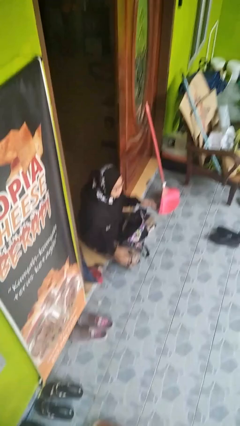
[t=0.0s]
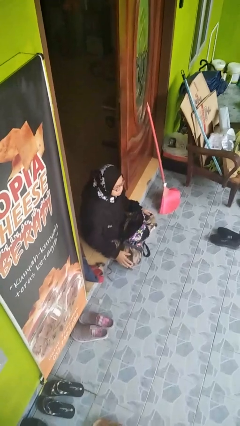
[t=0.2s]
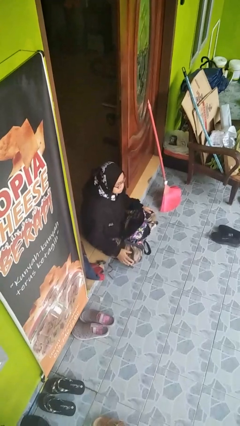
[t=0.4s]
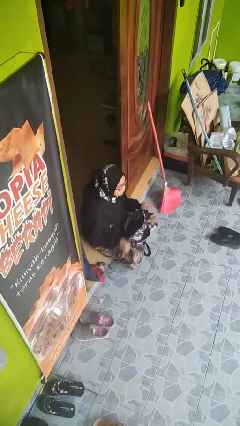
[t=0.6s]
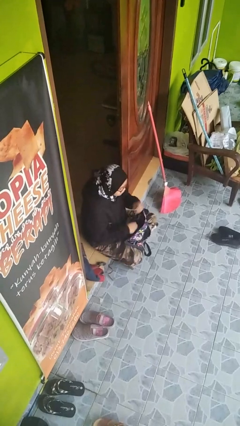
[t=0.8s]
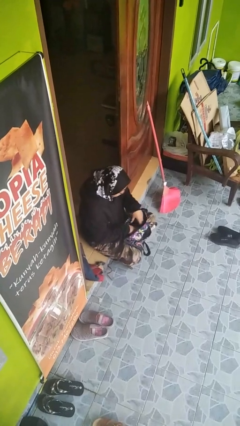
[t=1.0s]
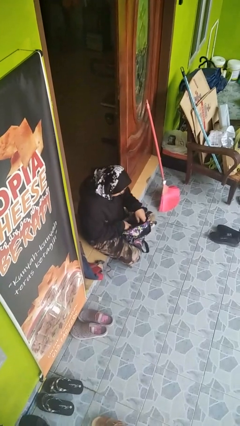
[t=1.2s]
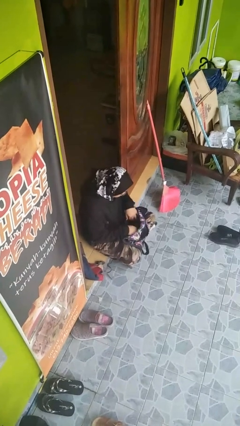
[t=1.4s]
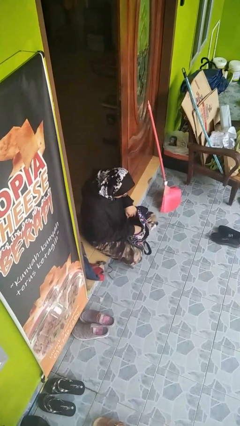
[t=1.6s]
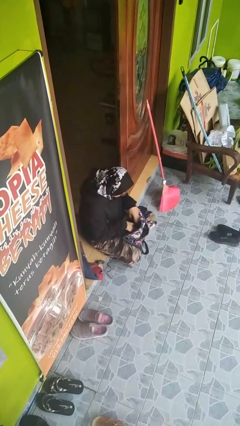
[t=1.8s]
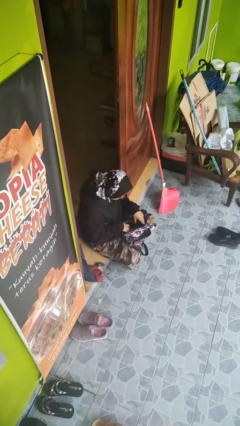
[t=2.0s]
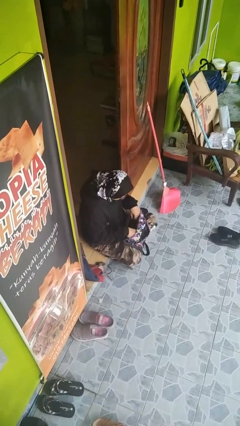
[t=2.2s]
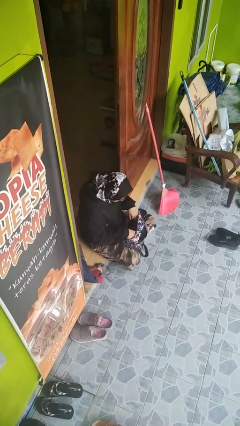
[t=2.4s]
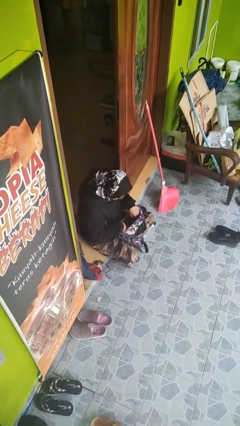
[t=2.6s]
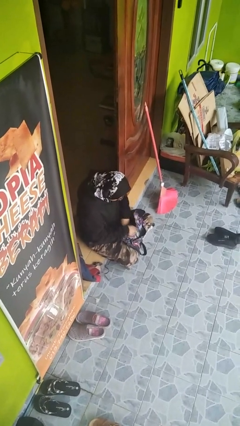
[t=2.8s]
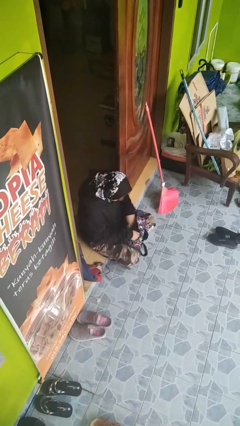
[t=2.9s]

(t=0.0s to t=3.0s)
person searches in purse

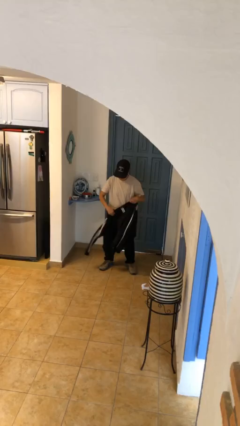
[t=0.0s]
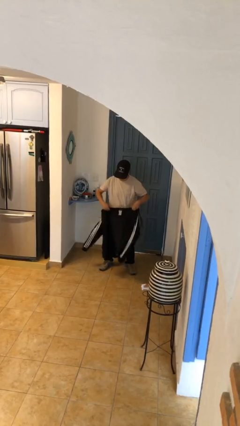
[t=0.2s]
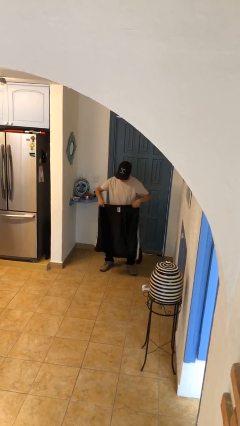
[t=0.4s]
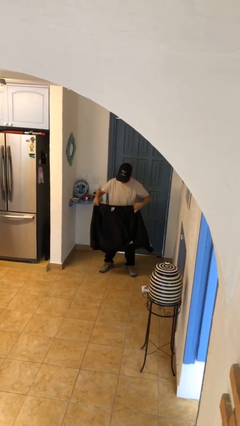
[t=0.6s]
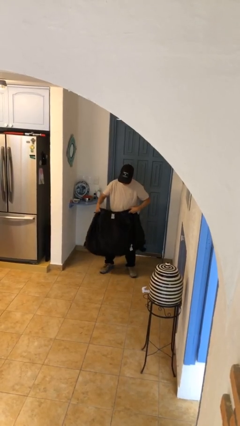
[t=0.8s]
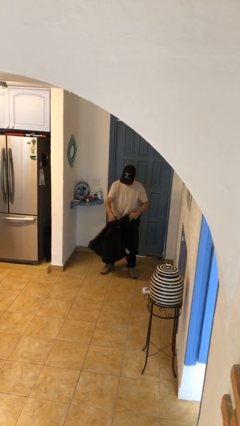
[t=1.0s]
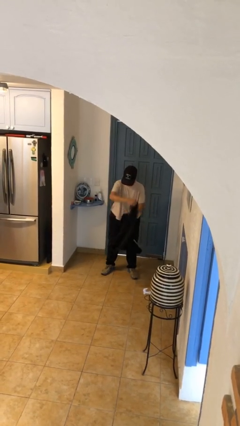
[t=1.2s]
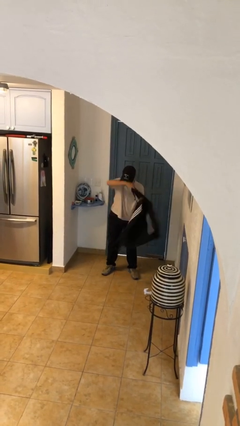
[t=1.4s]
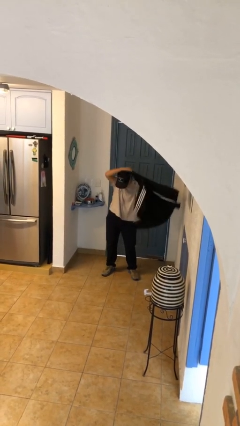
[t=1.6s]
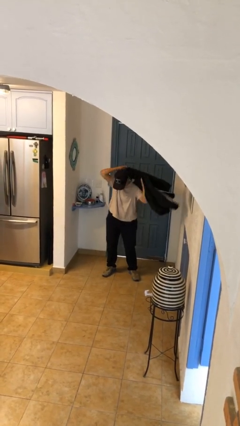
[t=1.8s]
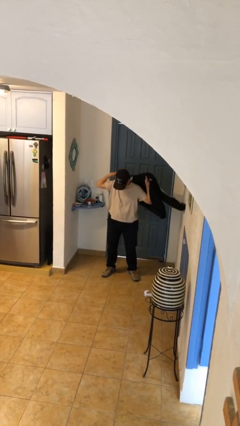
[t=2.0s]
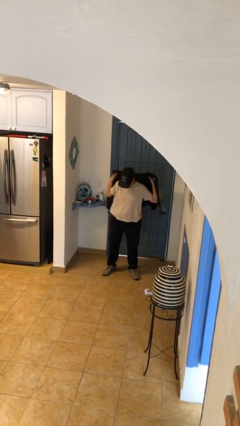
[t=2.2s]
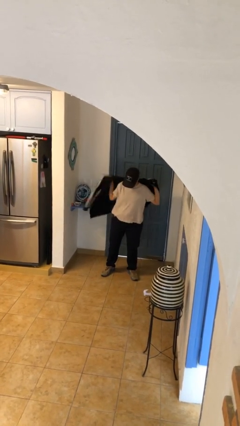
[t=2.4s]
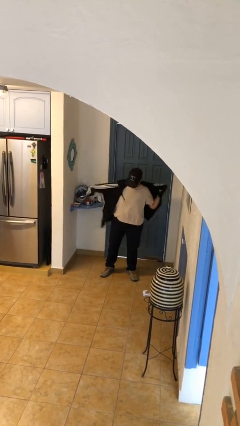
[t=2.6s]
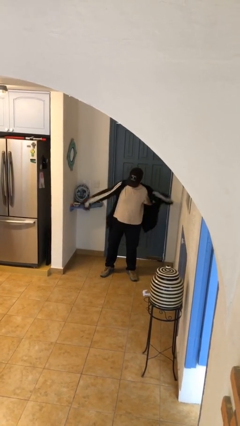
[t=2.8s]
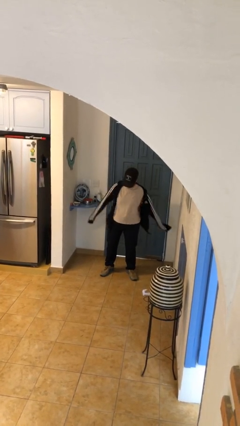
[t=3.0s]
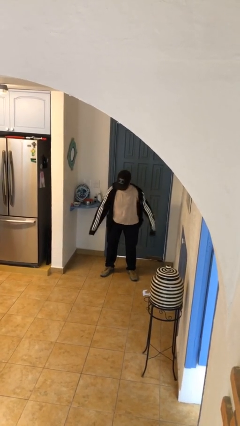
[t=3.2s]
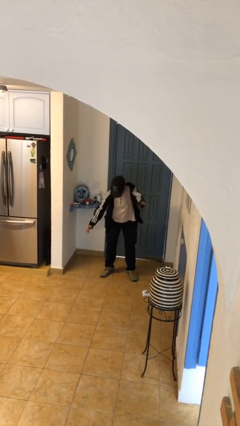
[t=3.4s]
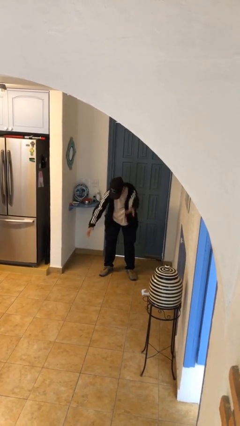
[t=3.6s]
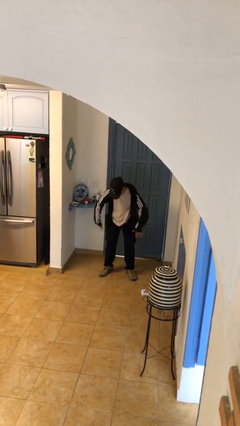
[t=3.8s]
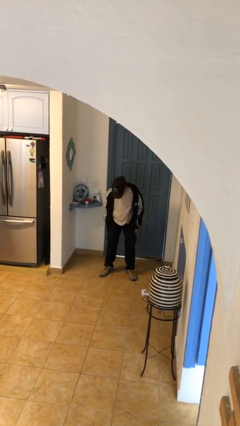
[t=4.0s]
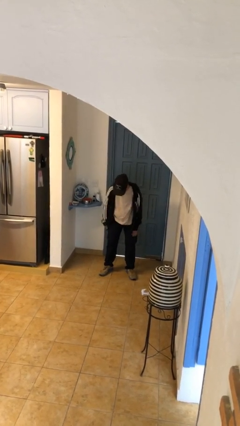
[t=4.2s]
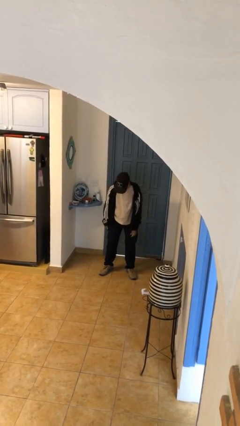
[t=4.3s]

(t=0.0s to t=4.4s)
person puts on jacket

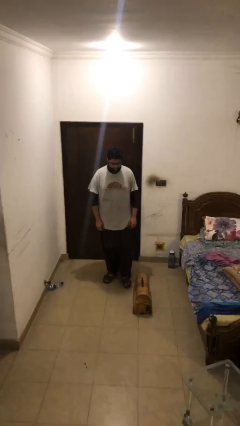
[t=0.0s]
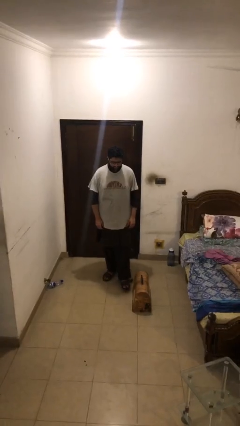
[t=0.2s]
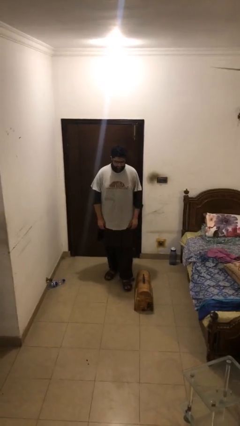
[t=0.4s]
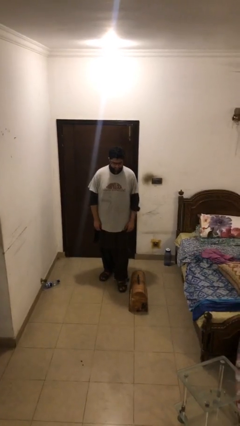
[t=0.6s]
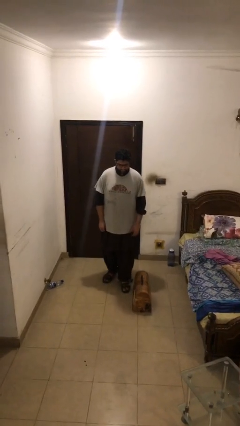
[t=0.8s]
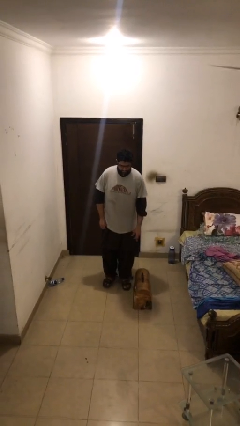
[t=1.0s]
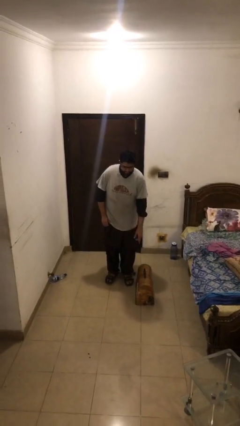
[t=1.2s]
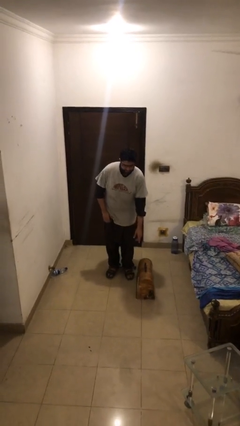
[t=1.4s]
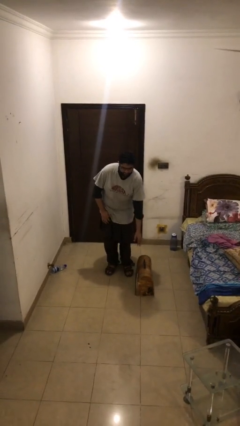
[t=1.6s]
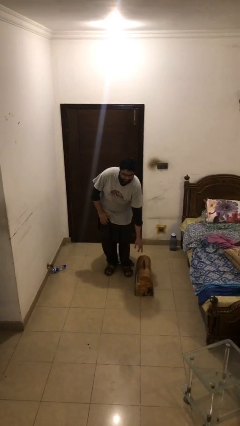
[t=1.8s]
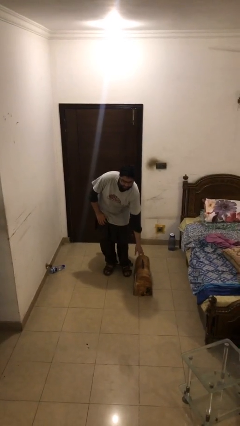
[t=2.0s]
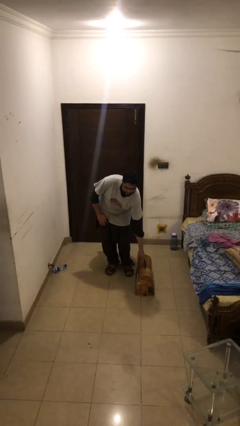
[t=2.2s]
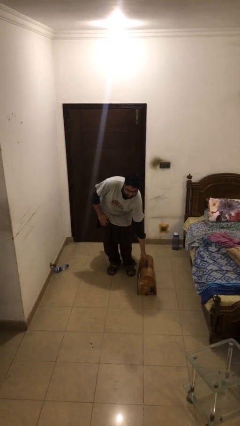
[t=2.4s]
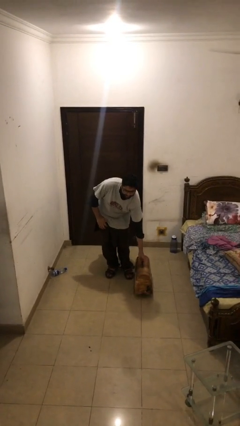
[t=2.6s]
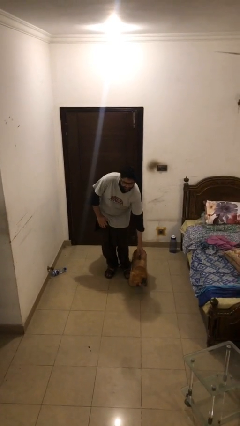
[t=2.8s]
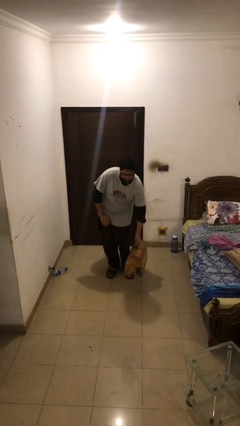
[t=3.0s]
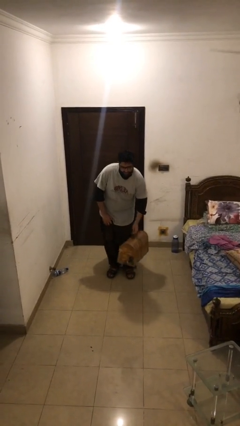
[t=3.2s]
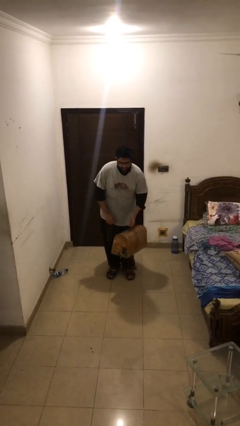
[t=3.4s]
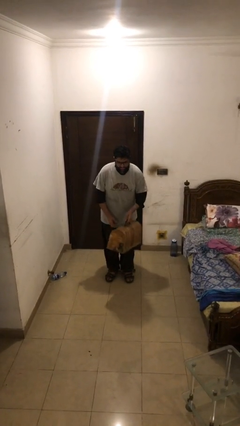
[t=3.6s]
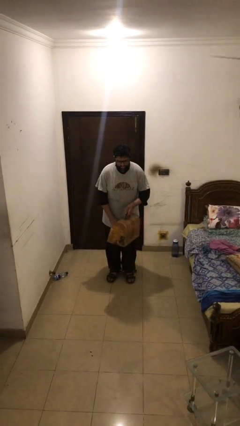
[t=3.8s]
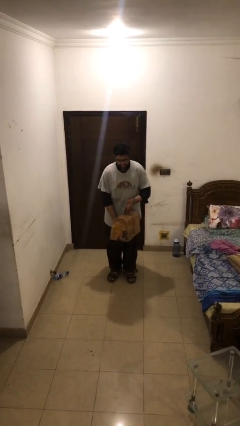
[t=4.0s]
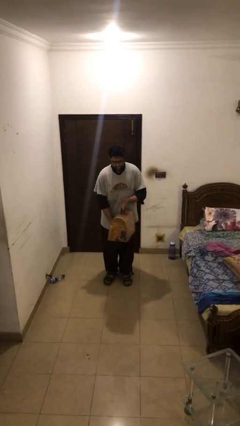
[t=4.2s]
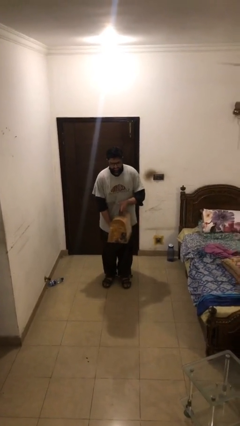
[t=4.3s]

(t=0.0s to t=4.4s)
person picks up object from floor

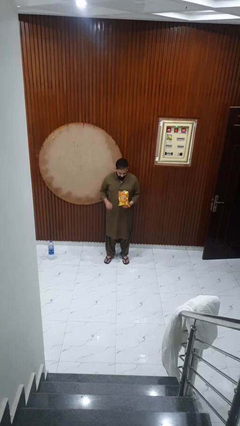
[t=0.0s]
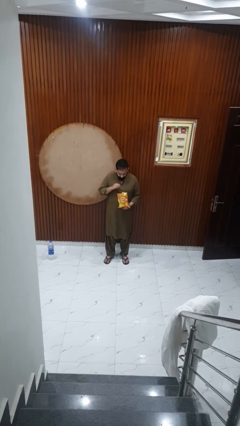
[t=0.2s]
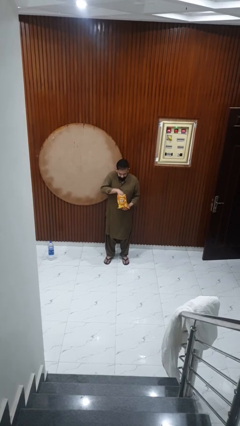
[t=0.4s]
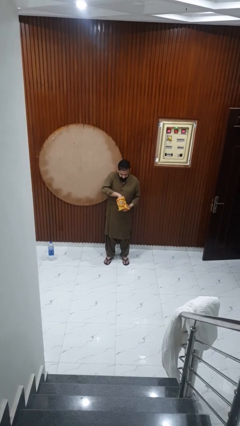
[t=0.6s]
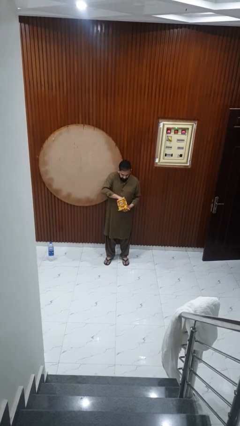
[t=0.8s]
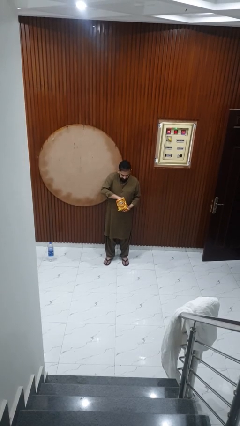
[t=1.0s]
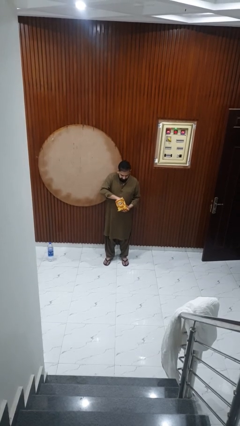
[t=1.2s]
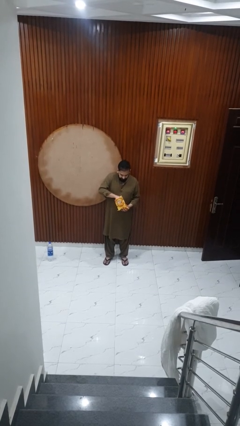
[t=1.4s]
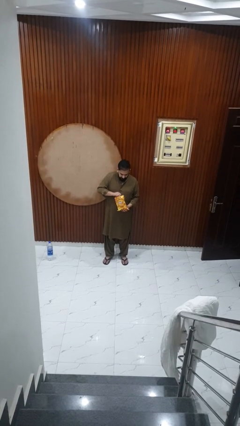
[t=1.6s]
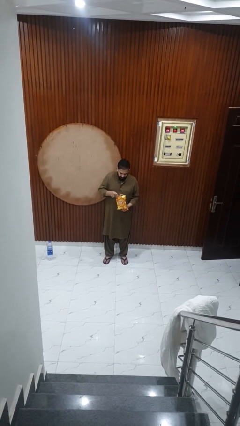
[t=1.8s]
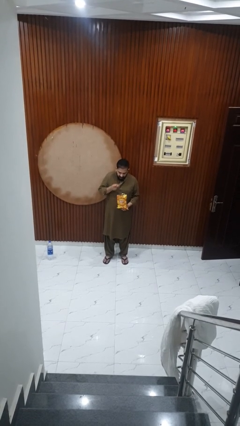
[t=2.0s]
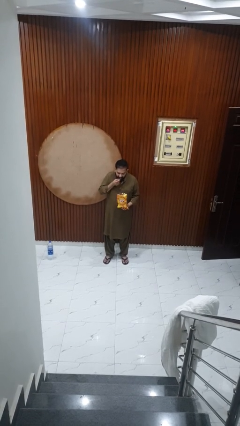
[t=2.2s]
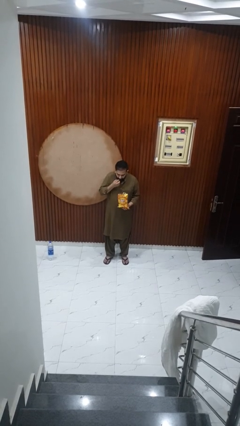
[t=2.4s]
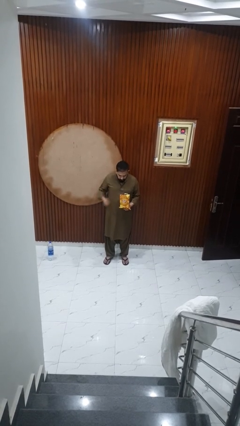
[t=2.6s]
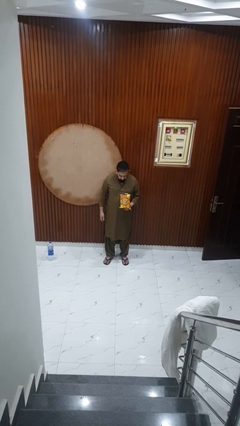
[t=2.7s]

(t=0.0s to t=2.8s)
person eats snack from bag

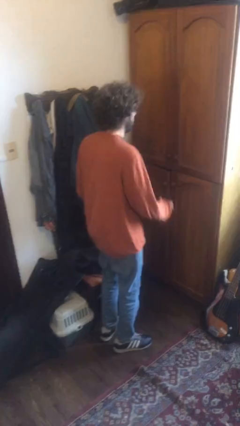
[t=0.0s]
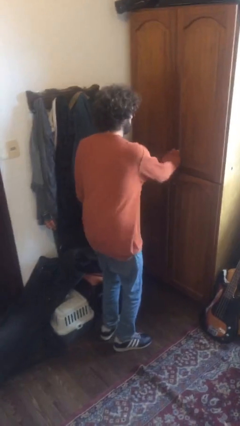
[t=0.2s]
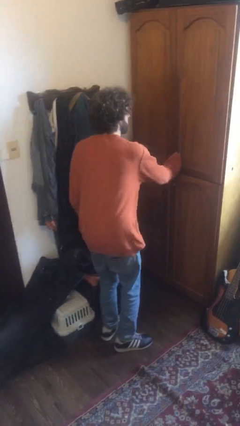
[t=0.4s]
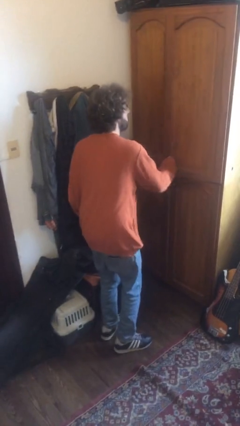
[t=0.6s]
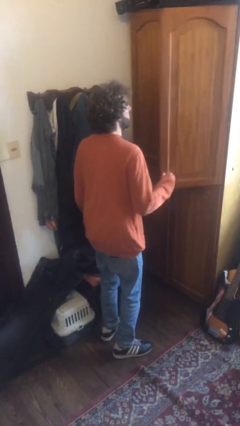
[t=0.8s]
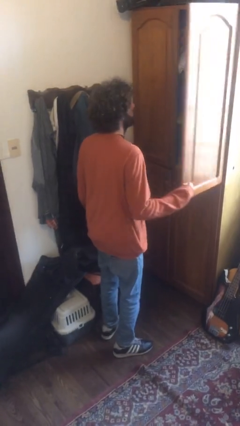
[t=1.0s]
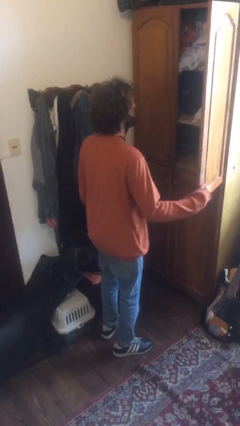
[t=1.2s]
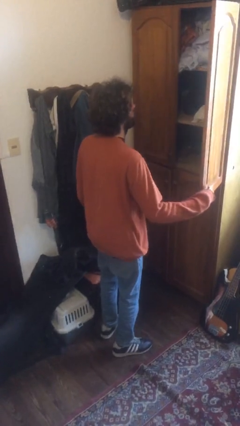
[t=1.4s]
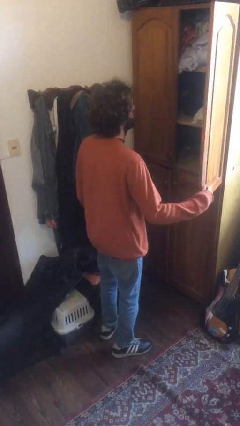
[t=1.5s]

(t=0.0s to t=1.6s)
person opens dresser drawer

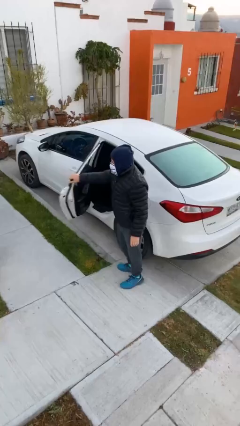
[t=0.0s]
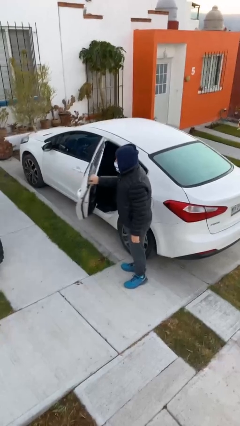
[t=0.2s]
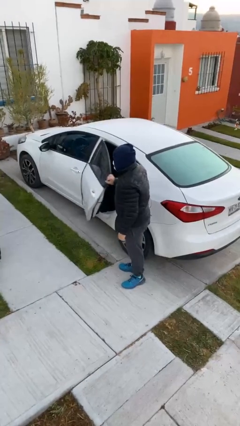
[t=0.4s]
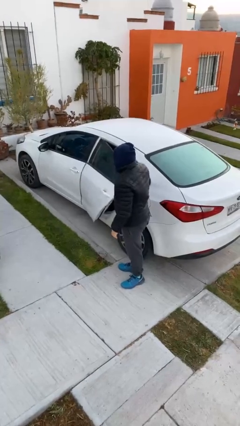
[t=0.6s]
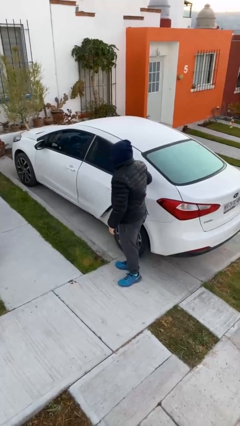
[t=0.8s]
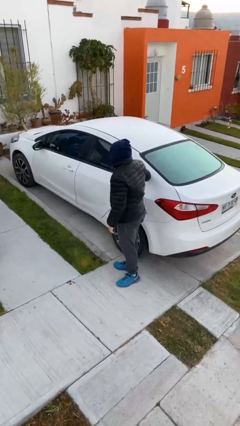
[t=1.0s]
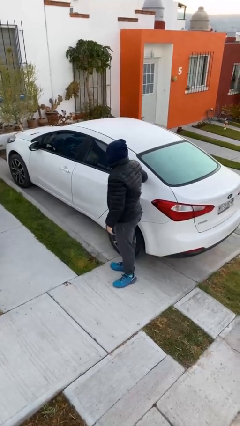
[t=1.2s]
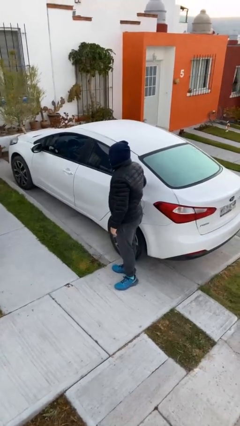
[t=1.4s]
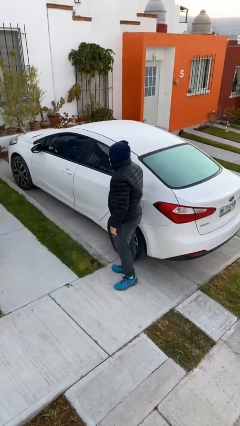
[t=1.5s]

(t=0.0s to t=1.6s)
person closes car door
